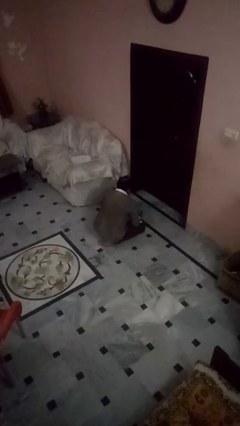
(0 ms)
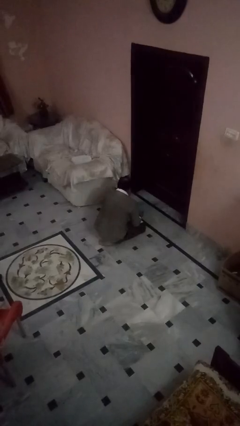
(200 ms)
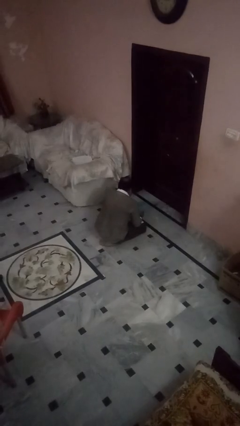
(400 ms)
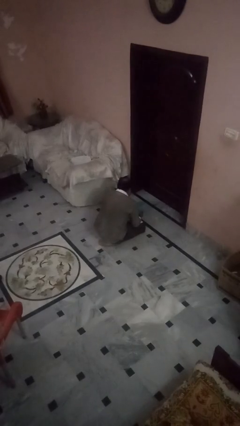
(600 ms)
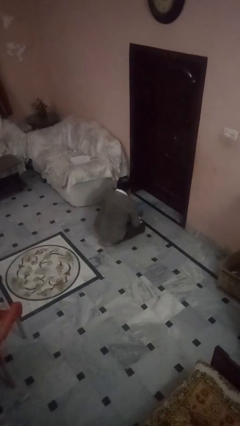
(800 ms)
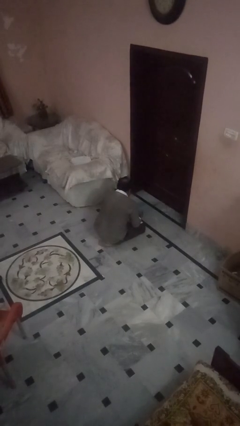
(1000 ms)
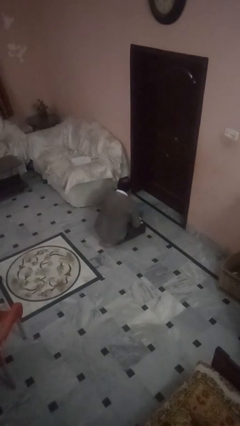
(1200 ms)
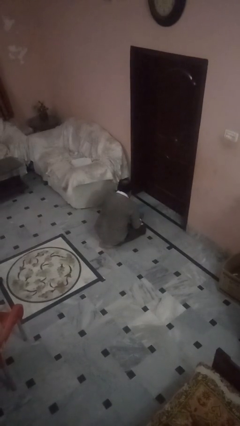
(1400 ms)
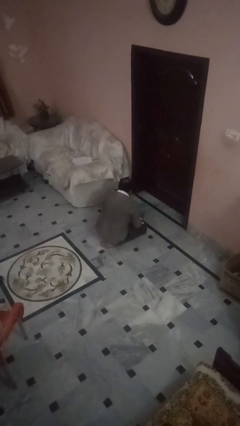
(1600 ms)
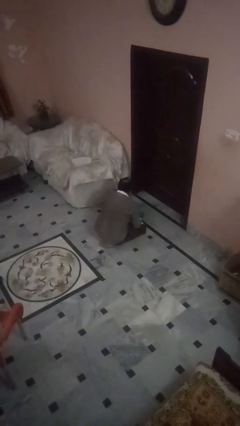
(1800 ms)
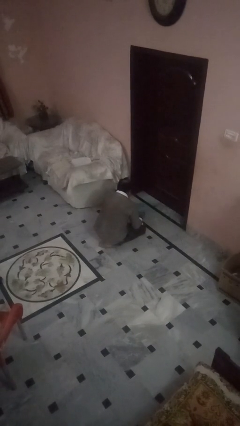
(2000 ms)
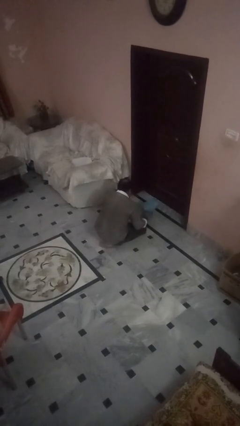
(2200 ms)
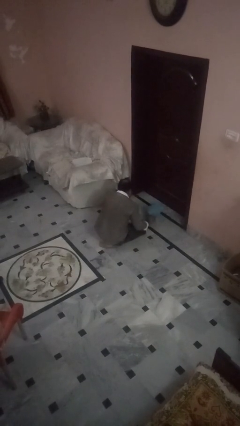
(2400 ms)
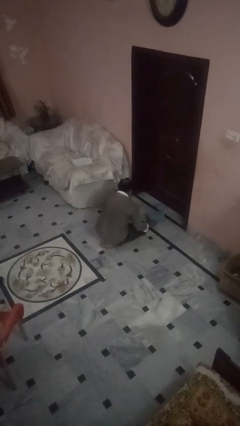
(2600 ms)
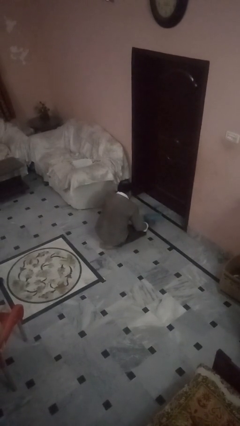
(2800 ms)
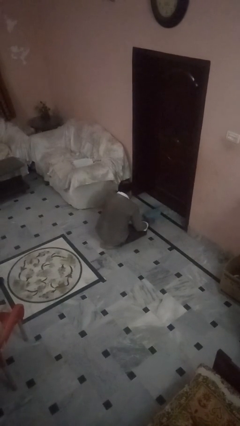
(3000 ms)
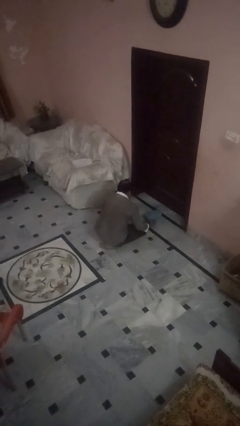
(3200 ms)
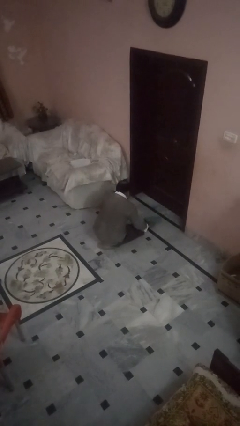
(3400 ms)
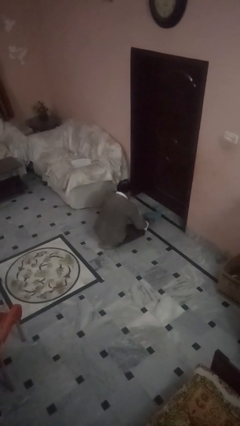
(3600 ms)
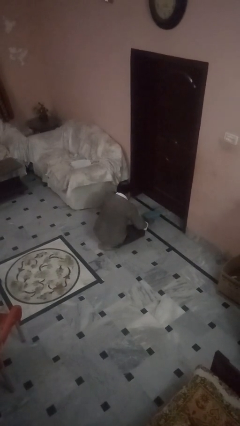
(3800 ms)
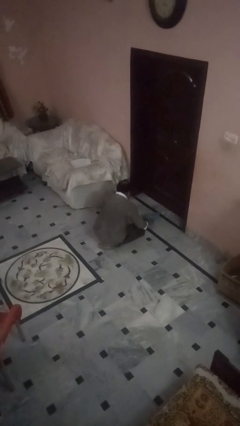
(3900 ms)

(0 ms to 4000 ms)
person swats bug

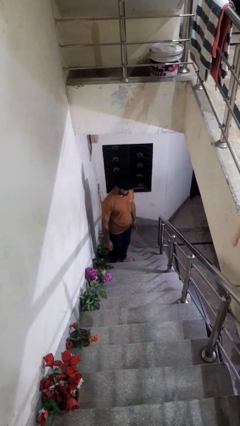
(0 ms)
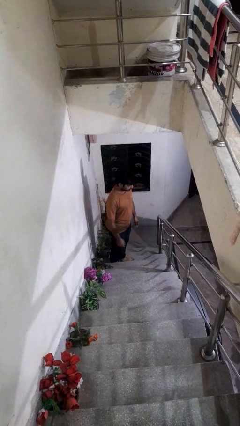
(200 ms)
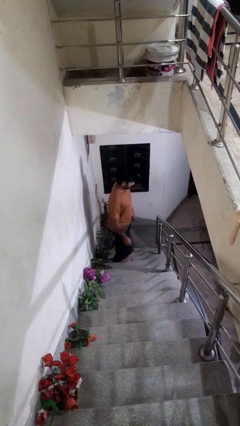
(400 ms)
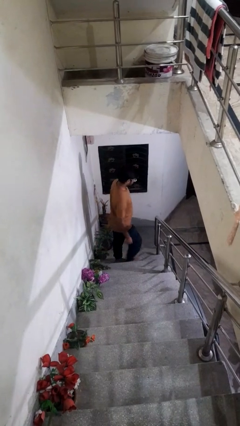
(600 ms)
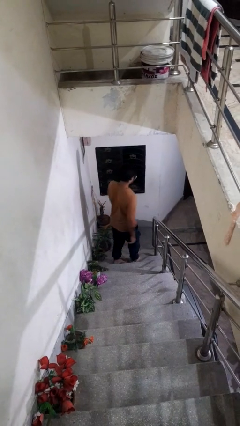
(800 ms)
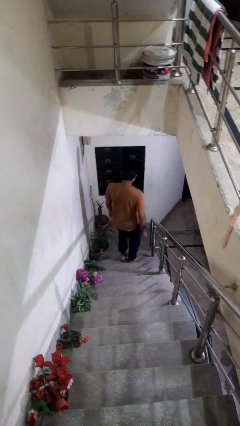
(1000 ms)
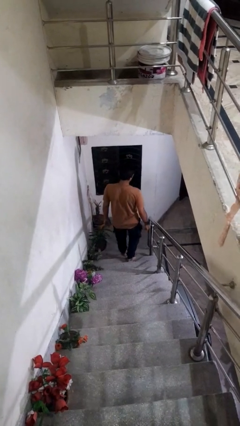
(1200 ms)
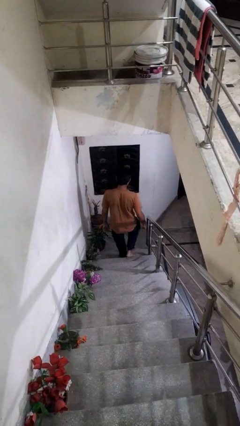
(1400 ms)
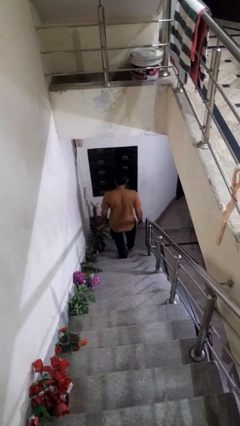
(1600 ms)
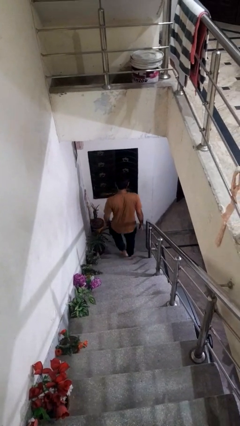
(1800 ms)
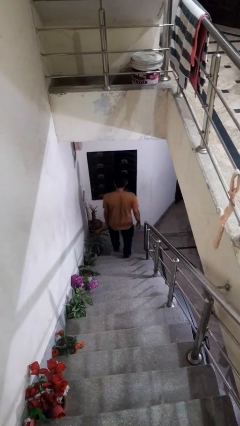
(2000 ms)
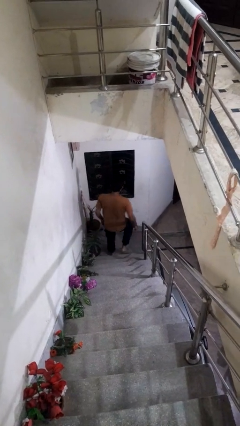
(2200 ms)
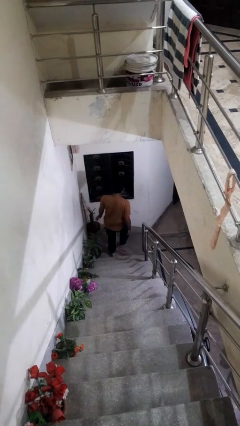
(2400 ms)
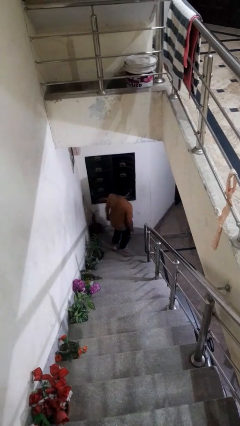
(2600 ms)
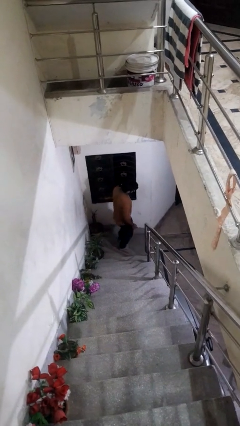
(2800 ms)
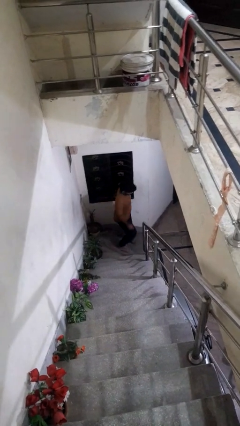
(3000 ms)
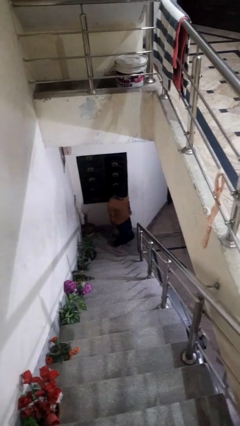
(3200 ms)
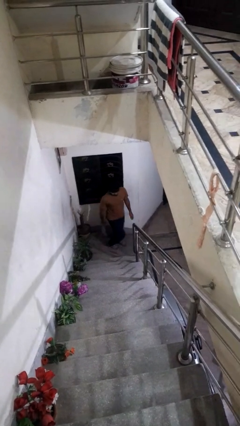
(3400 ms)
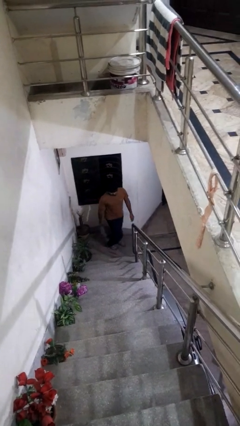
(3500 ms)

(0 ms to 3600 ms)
person climbs down stairs

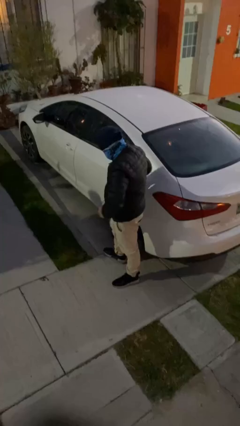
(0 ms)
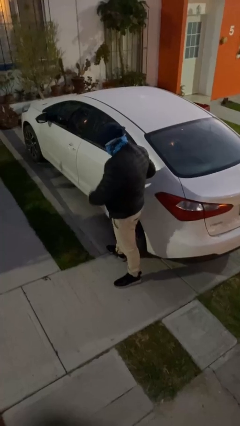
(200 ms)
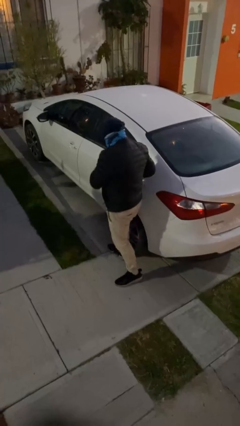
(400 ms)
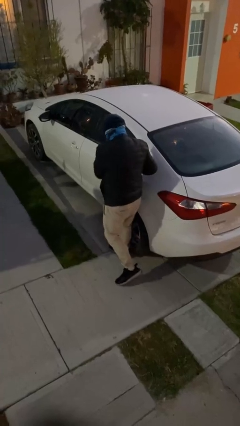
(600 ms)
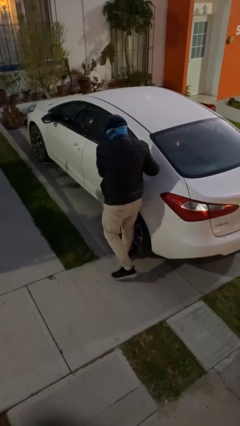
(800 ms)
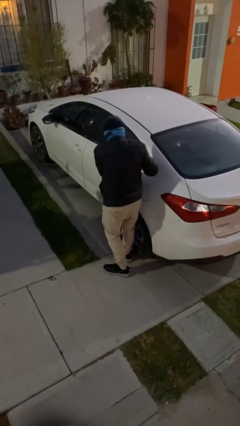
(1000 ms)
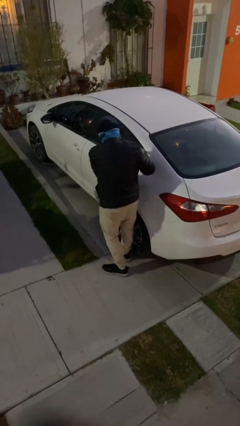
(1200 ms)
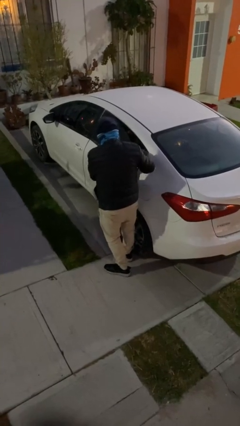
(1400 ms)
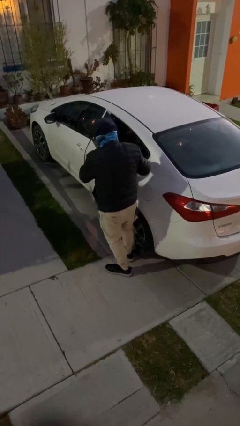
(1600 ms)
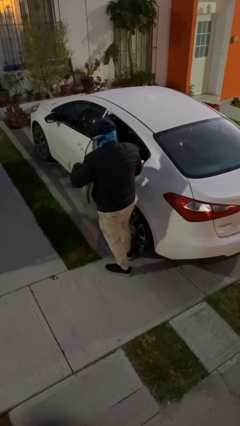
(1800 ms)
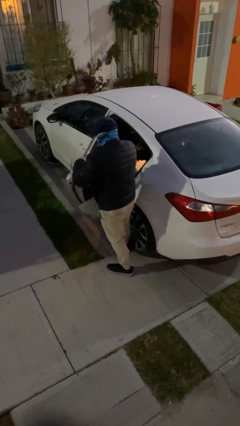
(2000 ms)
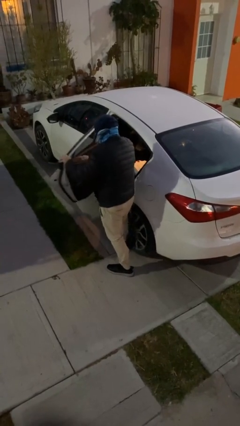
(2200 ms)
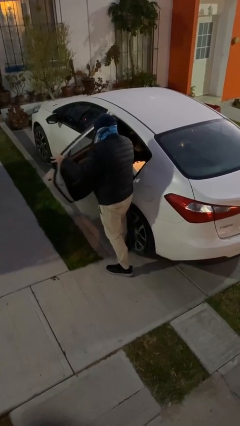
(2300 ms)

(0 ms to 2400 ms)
person opens car door

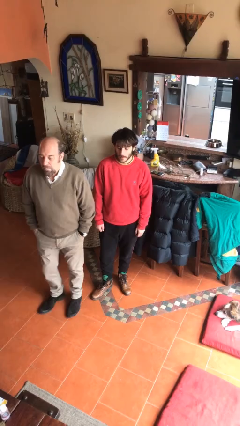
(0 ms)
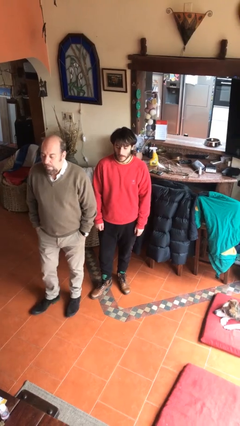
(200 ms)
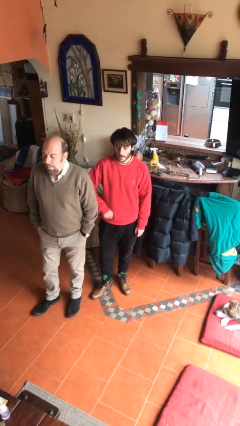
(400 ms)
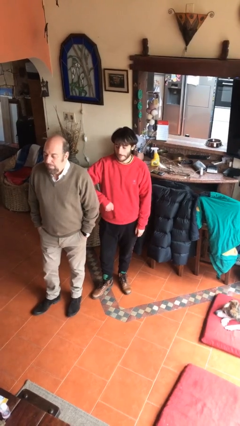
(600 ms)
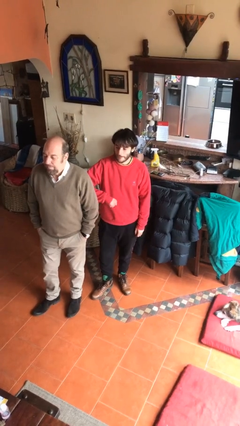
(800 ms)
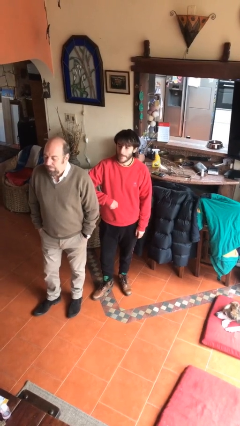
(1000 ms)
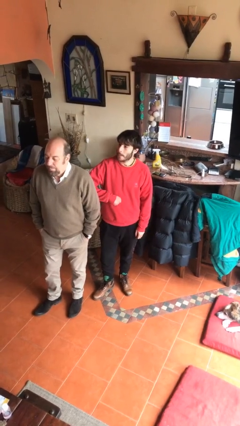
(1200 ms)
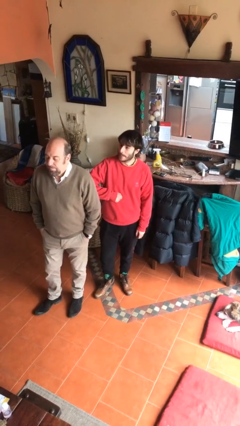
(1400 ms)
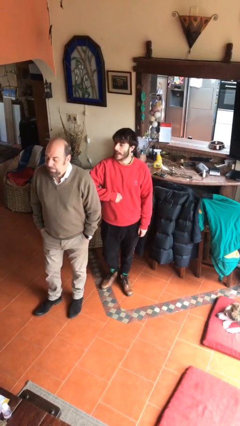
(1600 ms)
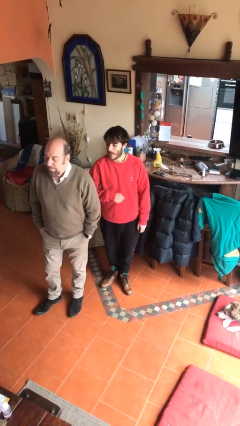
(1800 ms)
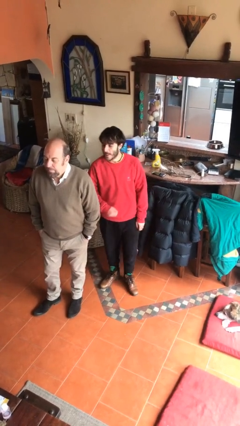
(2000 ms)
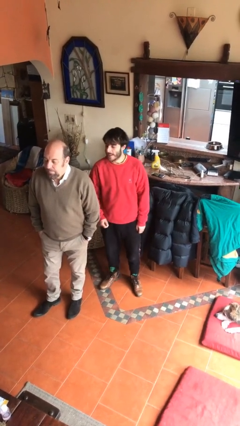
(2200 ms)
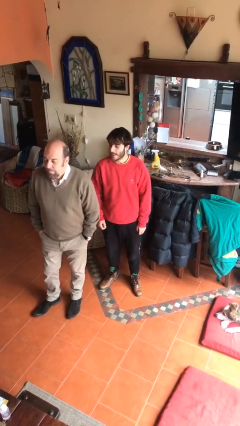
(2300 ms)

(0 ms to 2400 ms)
person nudges person with elbow

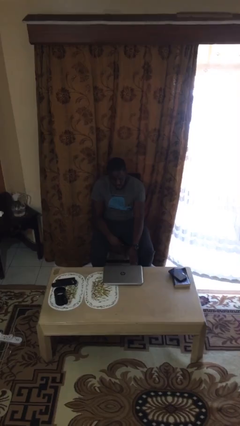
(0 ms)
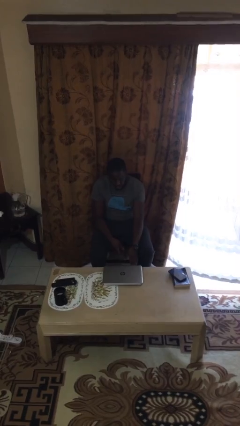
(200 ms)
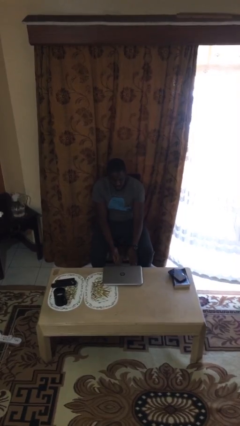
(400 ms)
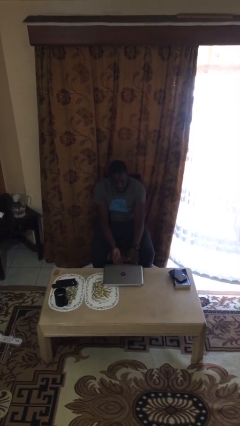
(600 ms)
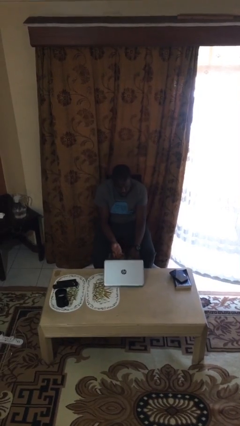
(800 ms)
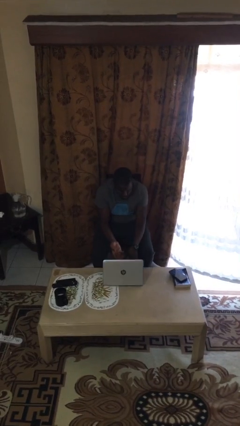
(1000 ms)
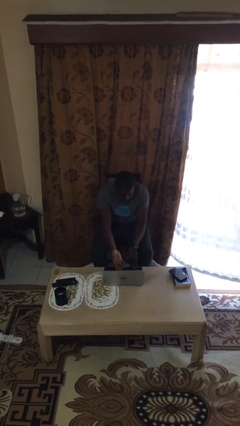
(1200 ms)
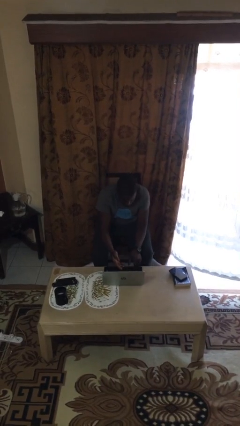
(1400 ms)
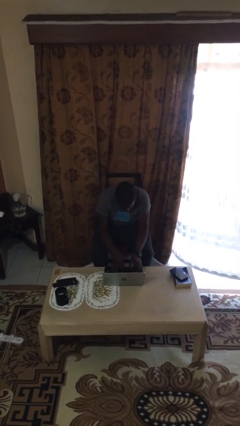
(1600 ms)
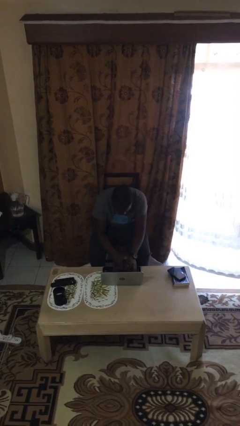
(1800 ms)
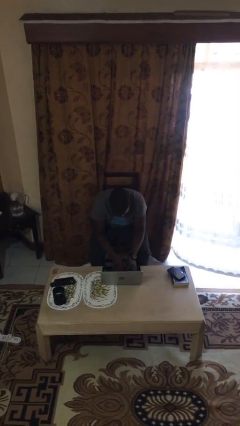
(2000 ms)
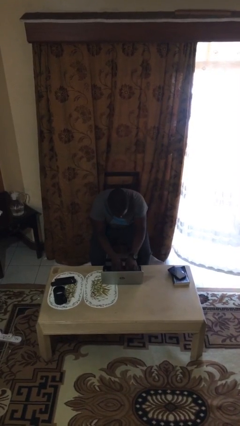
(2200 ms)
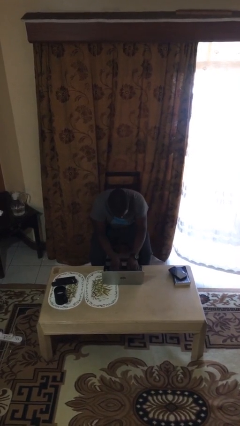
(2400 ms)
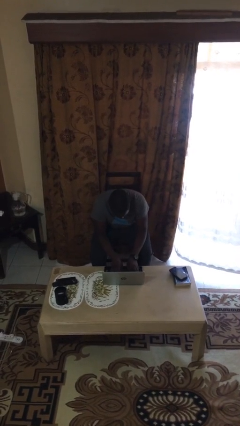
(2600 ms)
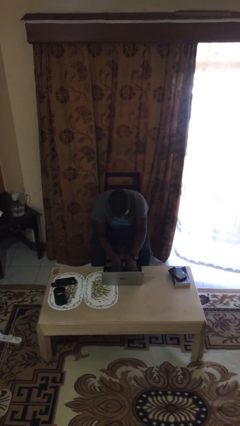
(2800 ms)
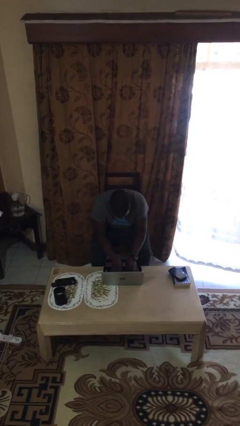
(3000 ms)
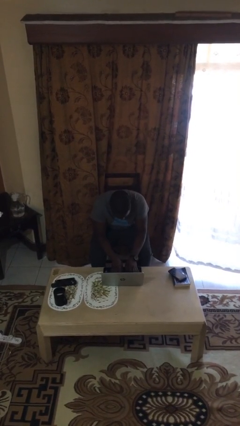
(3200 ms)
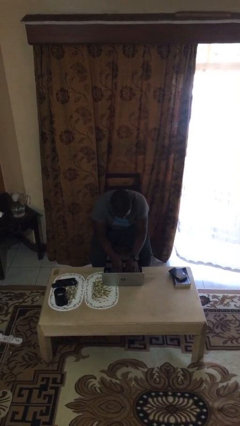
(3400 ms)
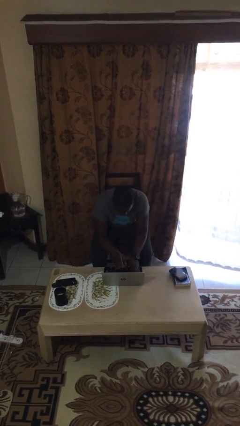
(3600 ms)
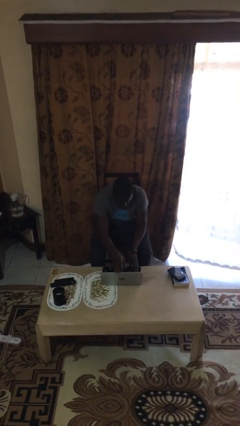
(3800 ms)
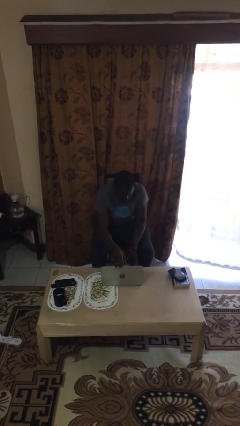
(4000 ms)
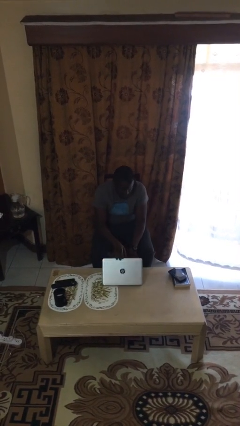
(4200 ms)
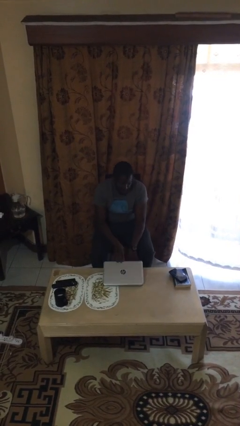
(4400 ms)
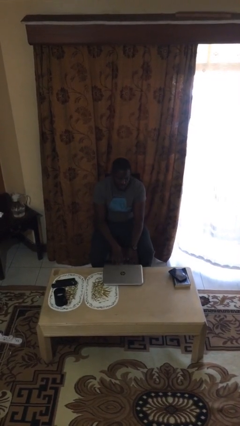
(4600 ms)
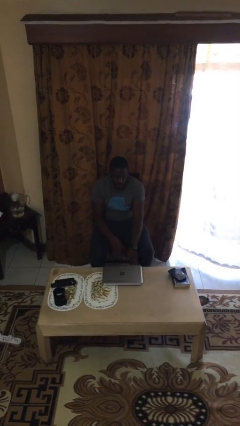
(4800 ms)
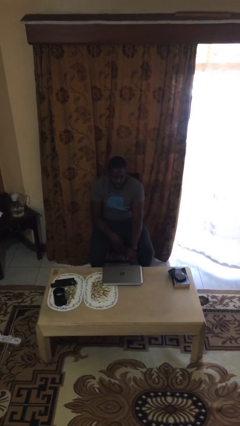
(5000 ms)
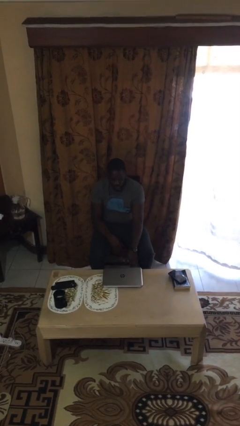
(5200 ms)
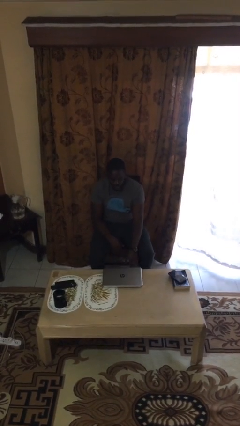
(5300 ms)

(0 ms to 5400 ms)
person interacts with laptop
